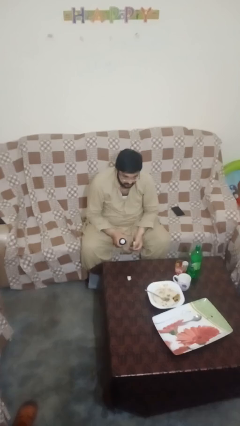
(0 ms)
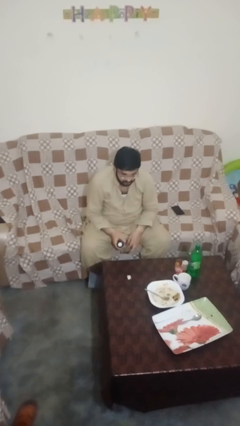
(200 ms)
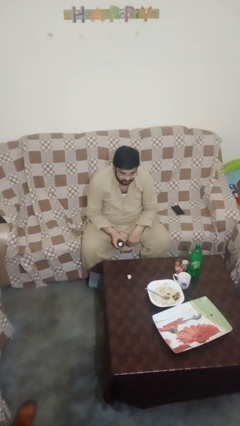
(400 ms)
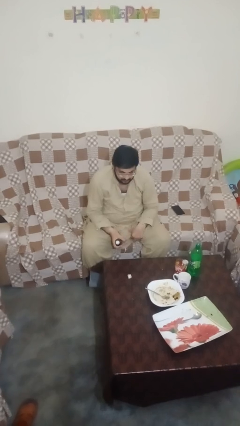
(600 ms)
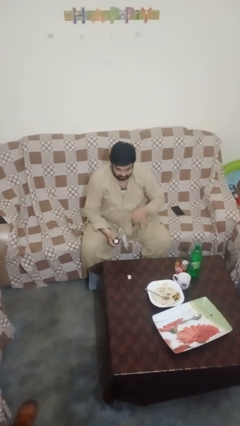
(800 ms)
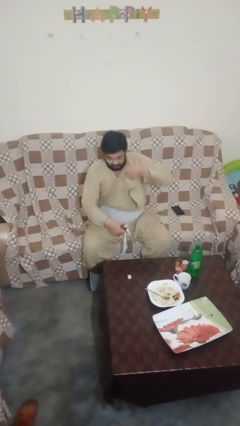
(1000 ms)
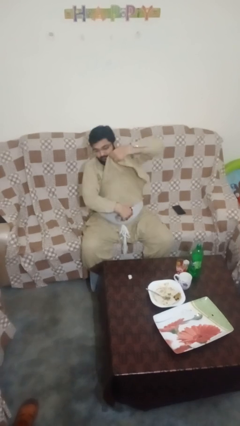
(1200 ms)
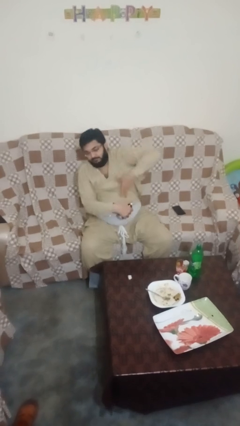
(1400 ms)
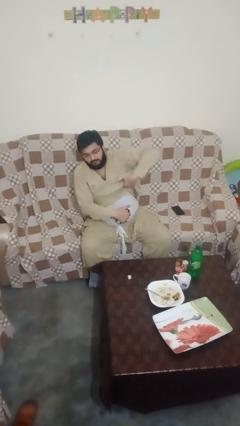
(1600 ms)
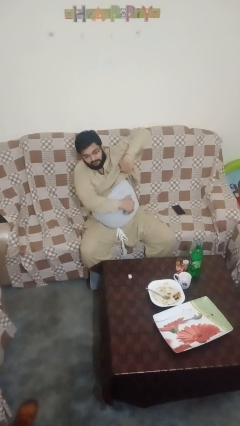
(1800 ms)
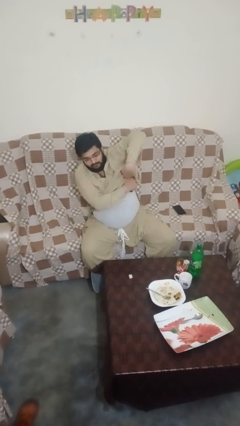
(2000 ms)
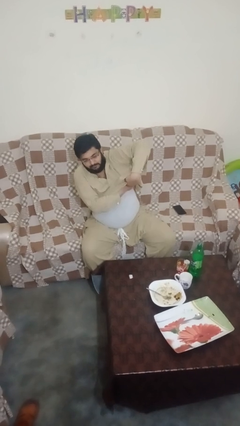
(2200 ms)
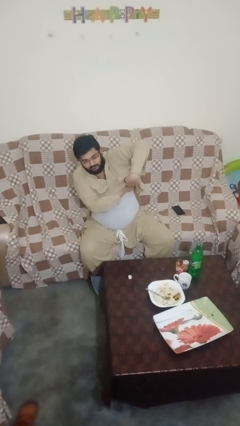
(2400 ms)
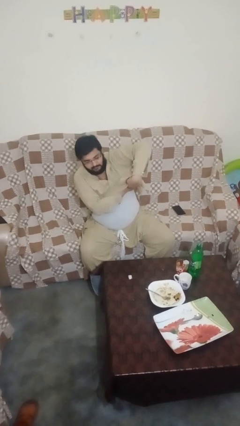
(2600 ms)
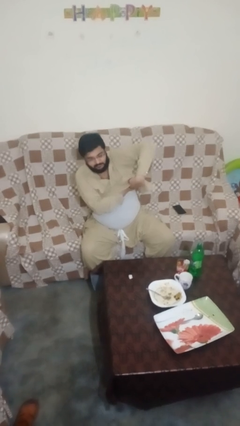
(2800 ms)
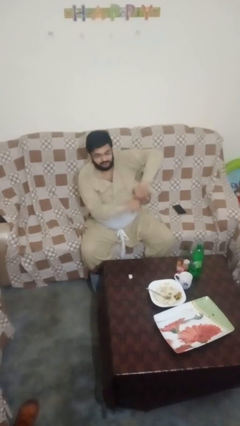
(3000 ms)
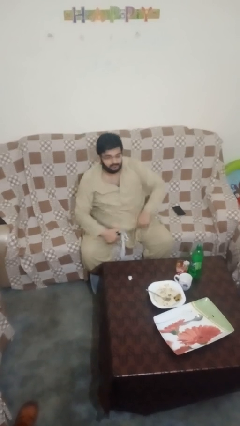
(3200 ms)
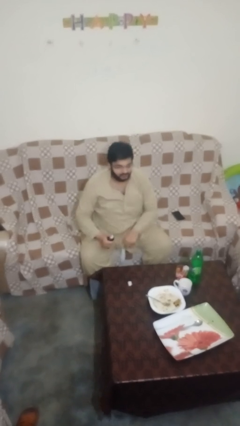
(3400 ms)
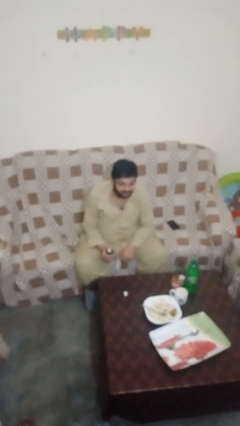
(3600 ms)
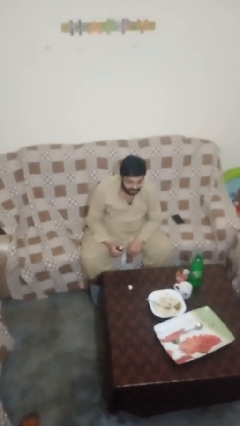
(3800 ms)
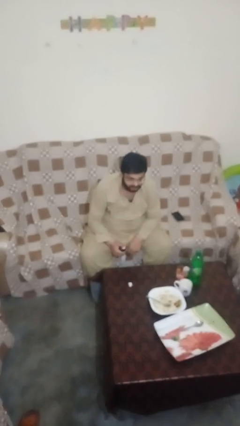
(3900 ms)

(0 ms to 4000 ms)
person applies deodorant

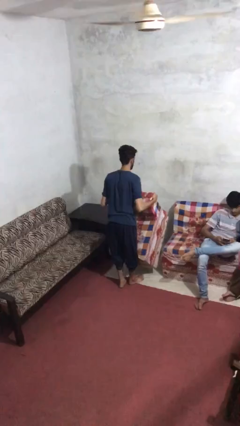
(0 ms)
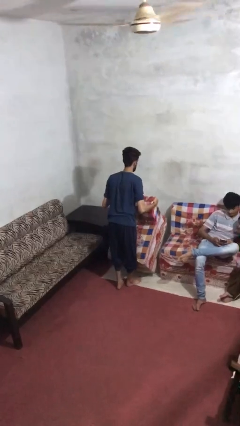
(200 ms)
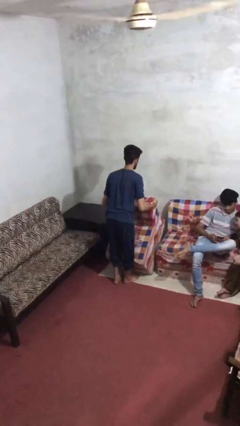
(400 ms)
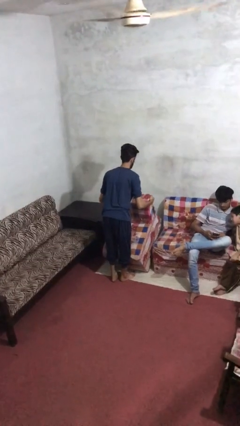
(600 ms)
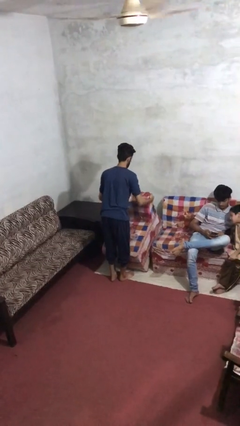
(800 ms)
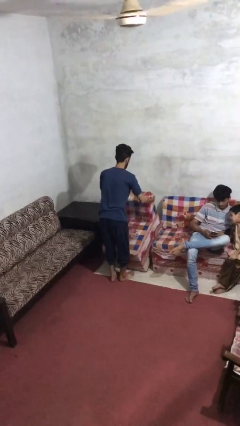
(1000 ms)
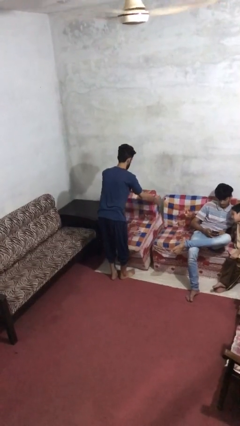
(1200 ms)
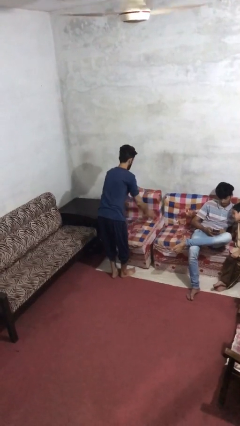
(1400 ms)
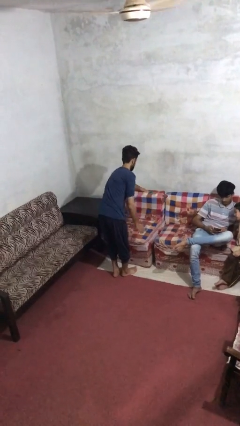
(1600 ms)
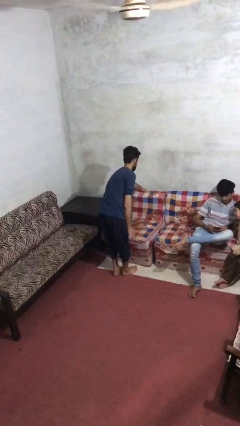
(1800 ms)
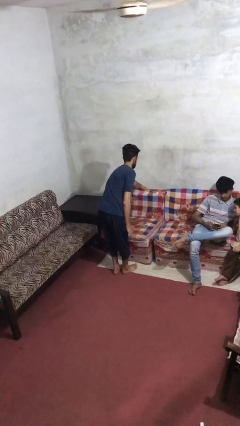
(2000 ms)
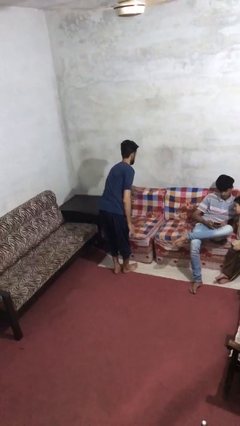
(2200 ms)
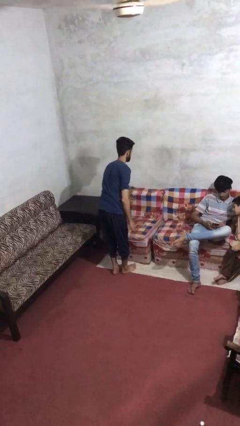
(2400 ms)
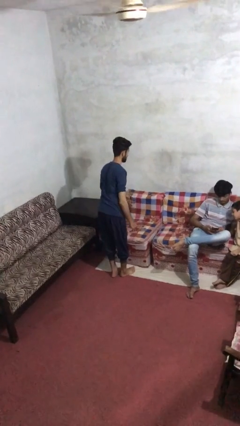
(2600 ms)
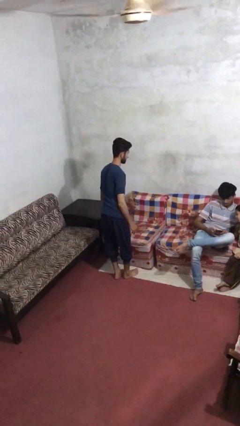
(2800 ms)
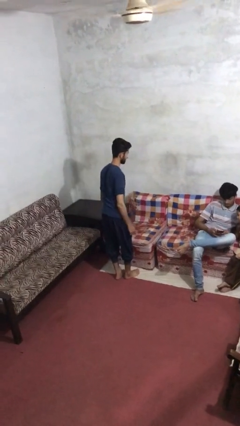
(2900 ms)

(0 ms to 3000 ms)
person puts down object on floor

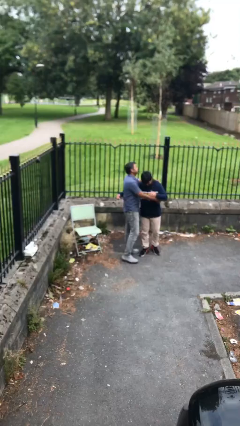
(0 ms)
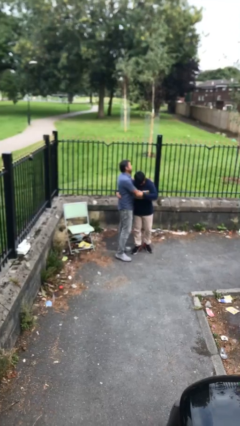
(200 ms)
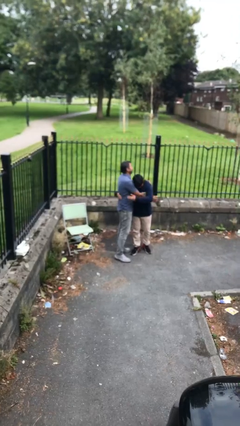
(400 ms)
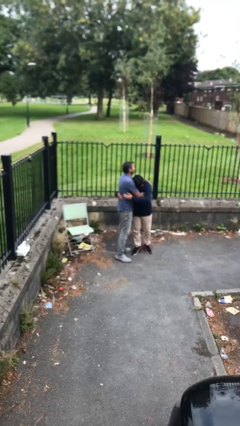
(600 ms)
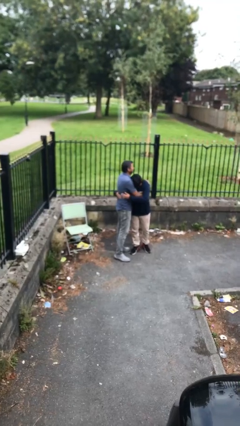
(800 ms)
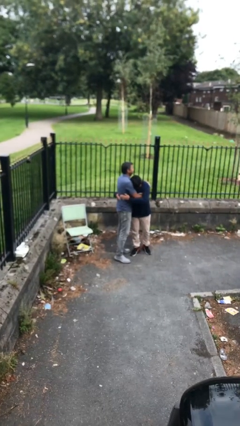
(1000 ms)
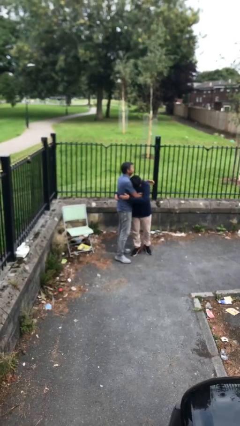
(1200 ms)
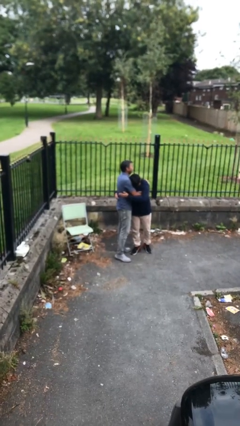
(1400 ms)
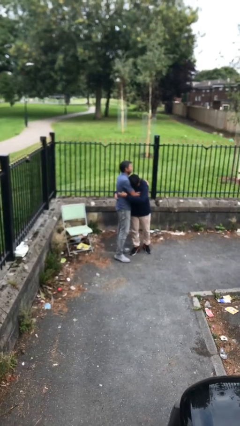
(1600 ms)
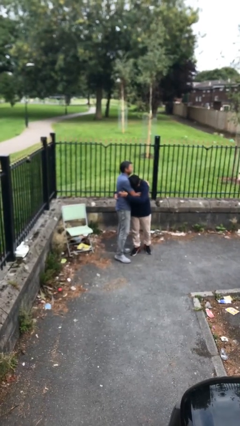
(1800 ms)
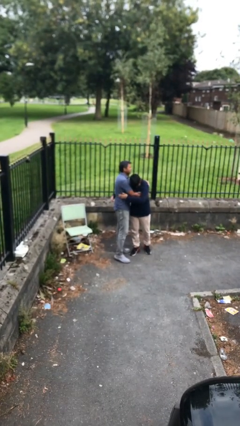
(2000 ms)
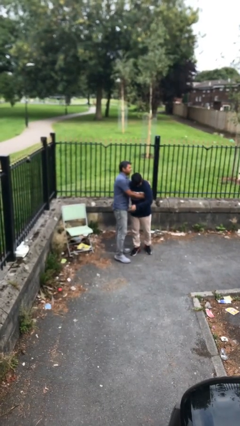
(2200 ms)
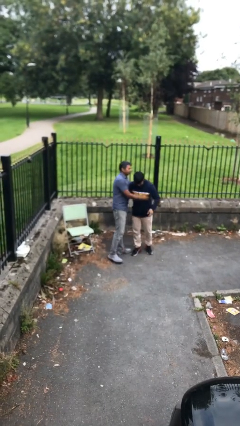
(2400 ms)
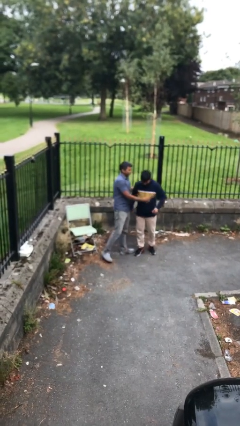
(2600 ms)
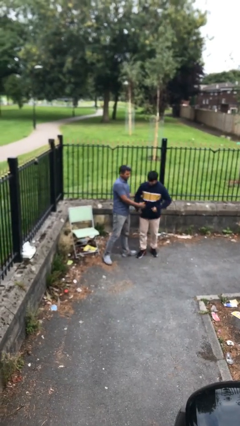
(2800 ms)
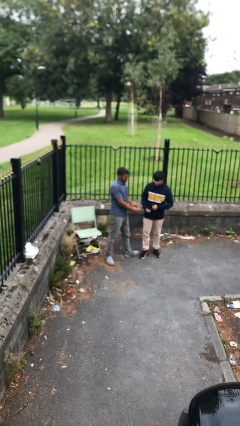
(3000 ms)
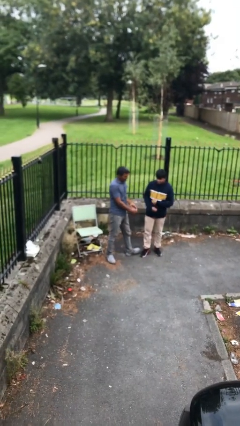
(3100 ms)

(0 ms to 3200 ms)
person embraces person

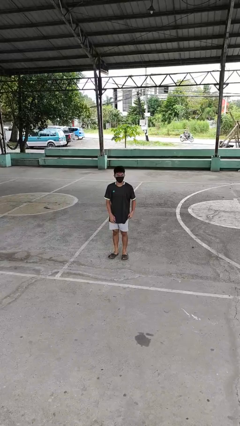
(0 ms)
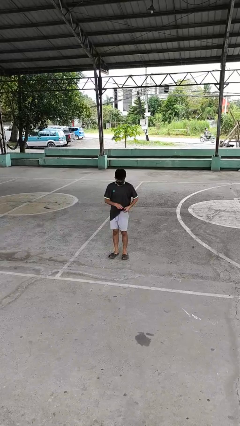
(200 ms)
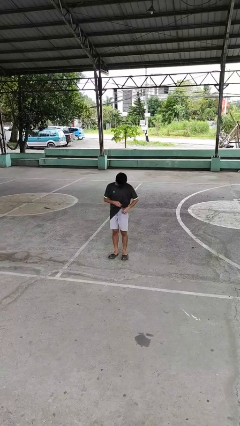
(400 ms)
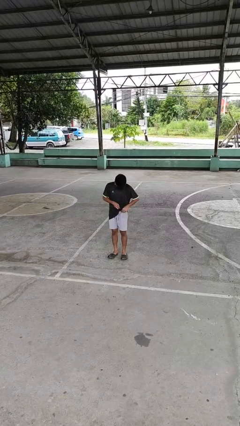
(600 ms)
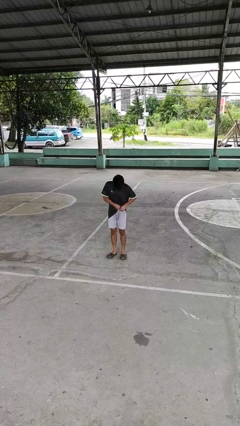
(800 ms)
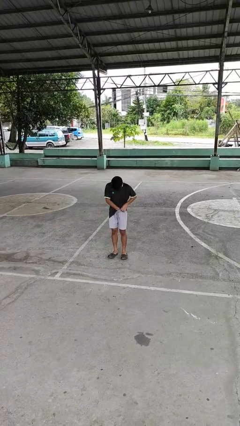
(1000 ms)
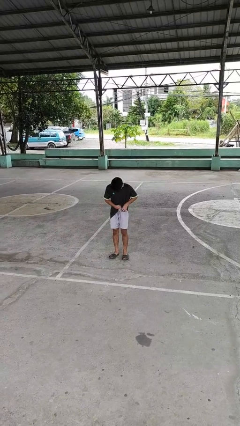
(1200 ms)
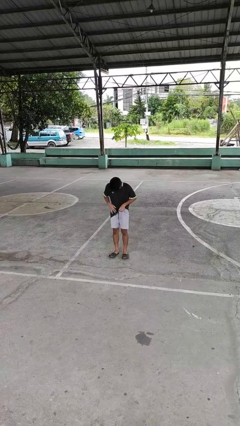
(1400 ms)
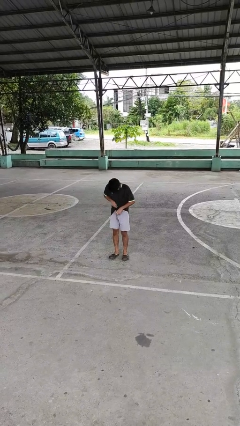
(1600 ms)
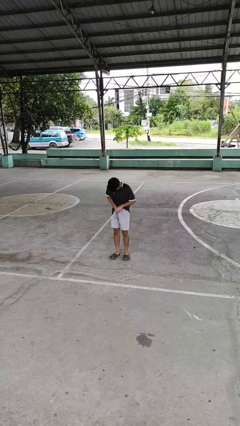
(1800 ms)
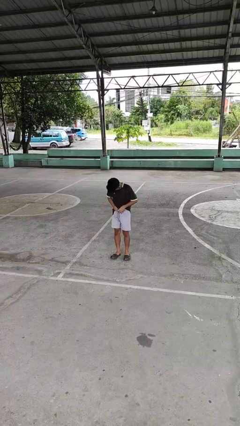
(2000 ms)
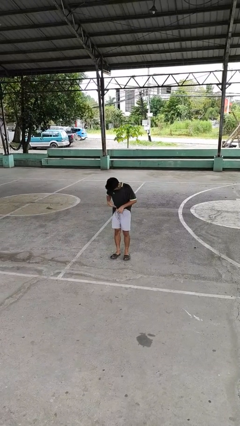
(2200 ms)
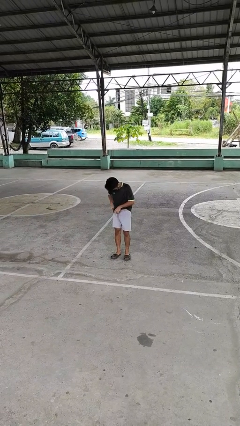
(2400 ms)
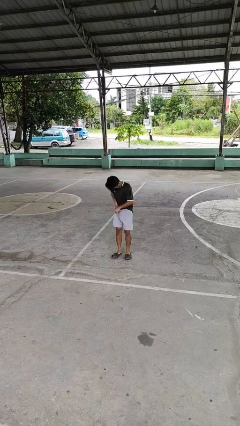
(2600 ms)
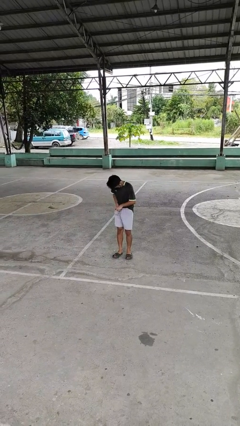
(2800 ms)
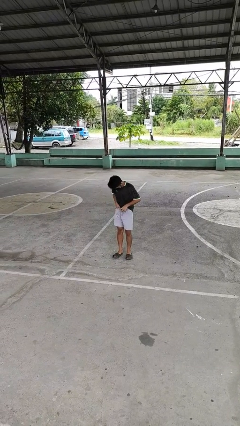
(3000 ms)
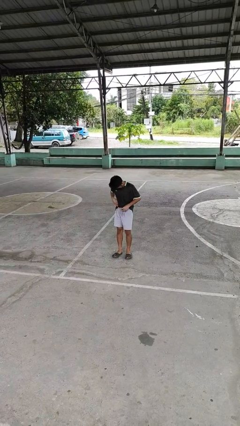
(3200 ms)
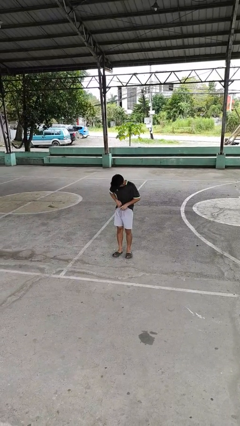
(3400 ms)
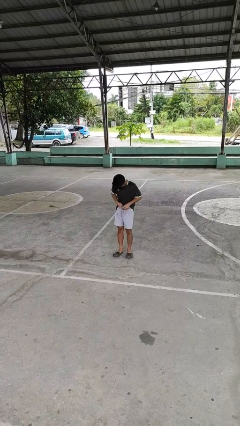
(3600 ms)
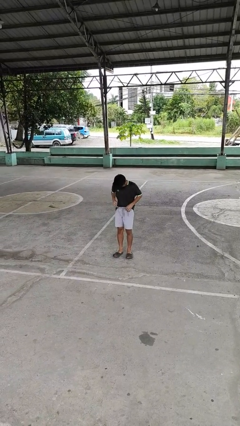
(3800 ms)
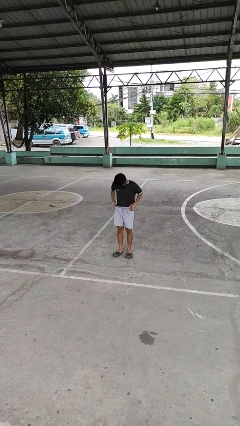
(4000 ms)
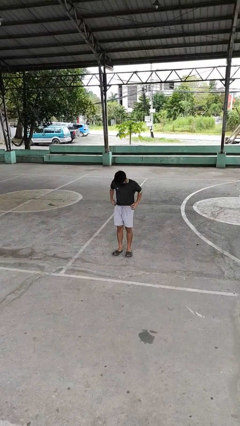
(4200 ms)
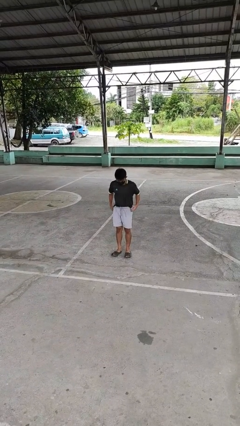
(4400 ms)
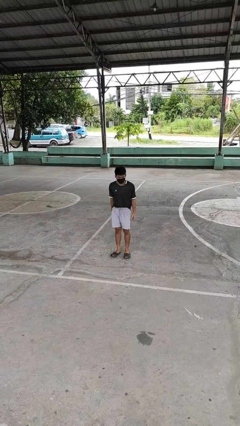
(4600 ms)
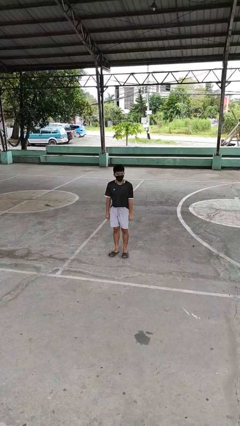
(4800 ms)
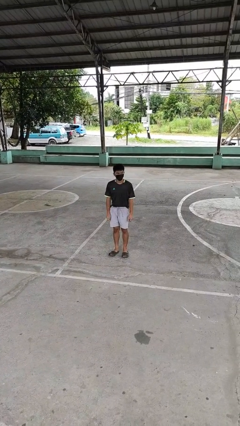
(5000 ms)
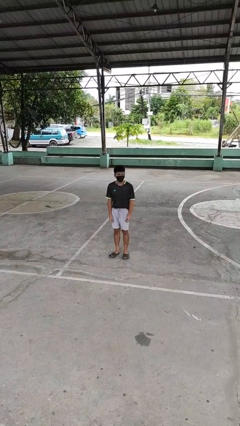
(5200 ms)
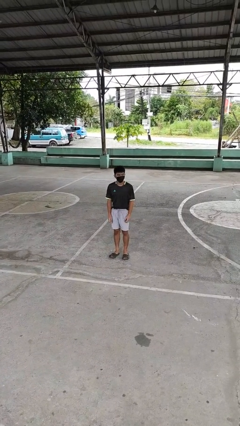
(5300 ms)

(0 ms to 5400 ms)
person tucks in shirt

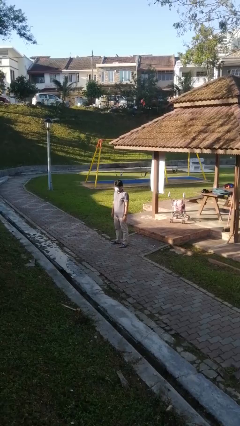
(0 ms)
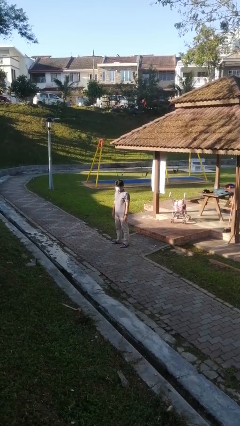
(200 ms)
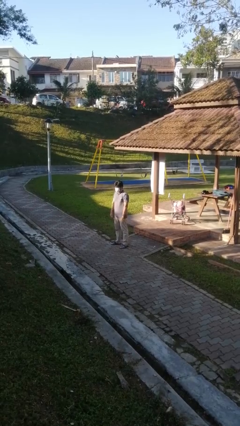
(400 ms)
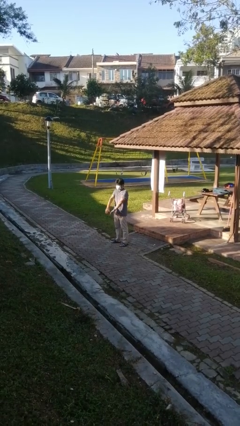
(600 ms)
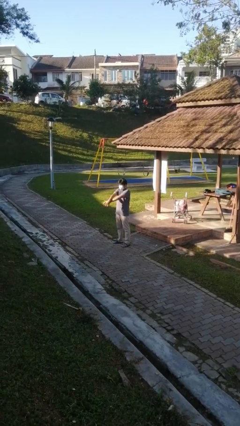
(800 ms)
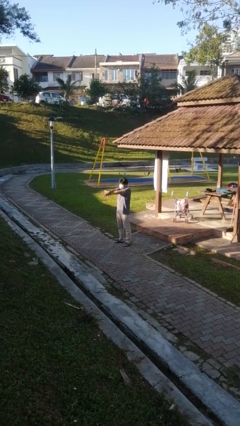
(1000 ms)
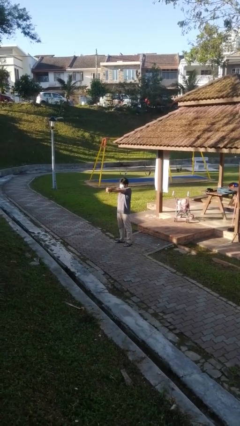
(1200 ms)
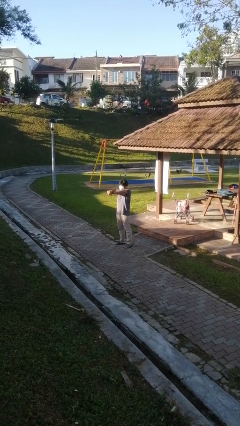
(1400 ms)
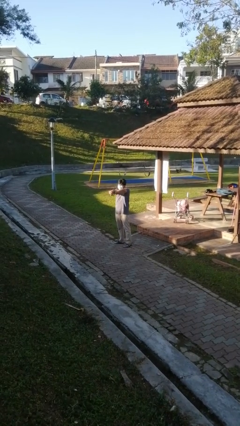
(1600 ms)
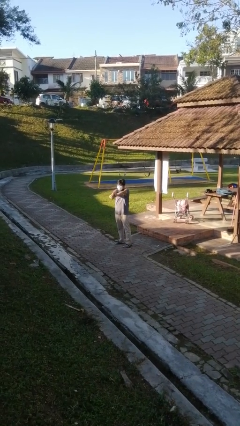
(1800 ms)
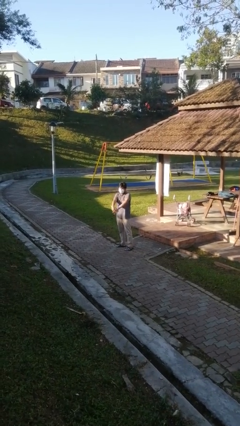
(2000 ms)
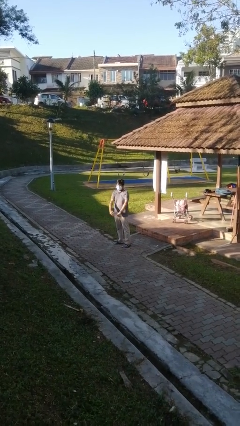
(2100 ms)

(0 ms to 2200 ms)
person crosses arms
